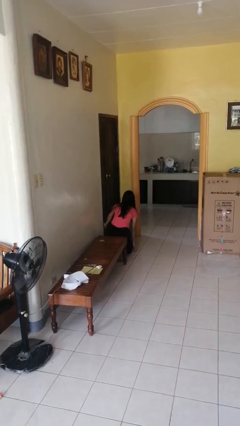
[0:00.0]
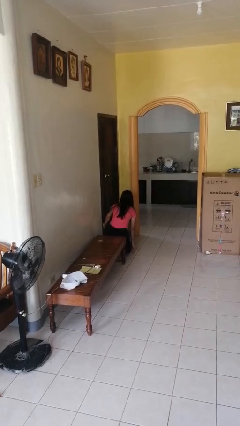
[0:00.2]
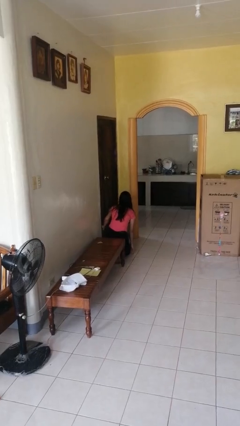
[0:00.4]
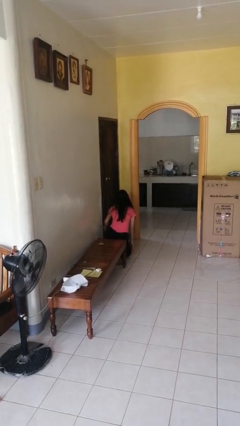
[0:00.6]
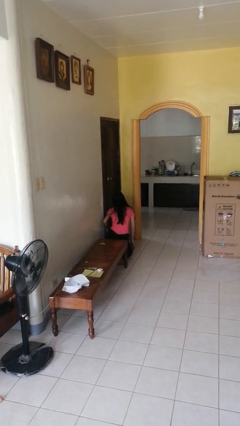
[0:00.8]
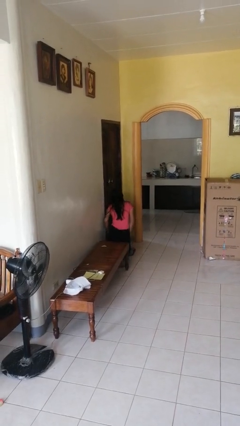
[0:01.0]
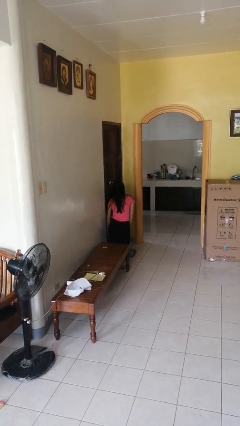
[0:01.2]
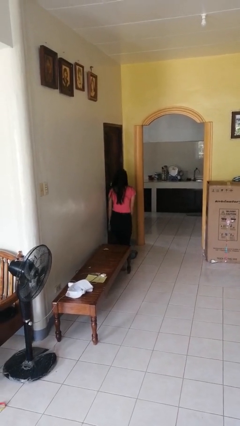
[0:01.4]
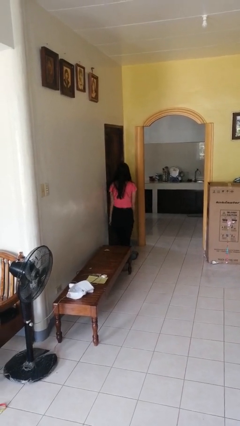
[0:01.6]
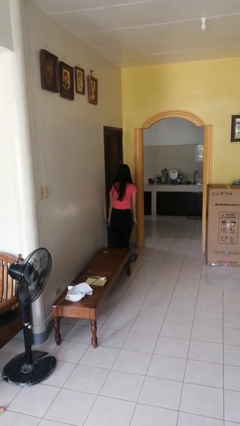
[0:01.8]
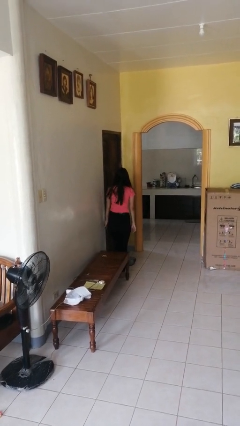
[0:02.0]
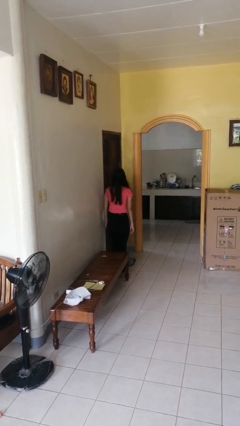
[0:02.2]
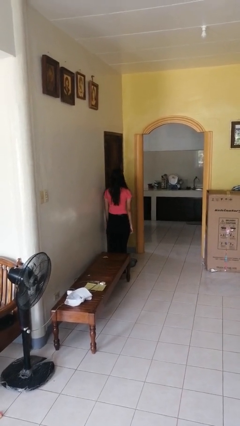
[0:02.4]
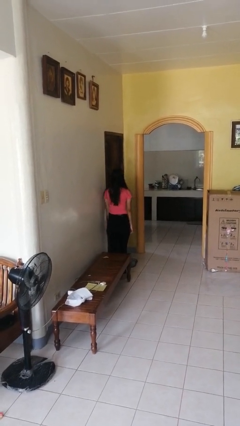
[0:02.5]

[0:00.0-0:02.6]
person stands up from floor

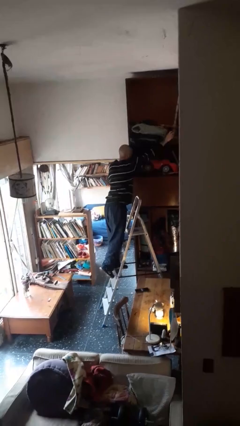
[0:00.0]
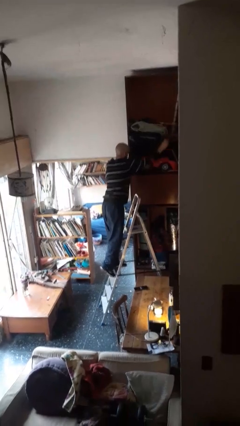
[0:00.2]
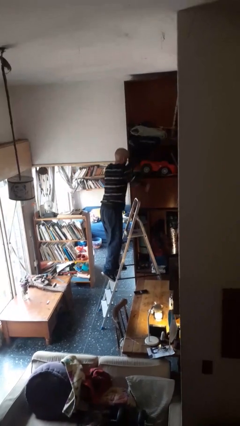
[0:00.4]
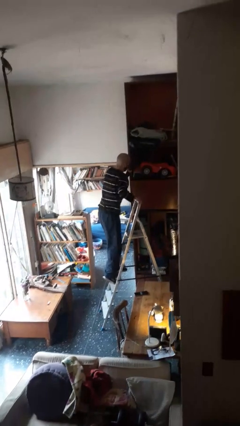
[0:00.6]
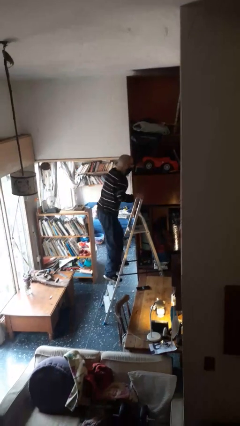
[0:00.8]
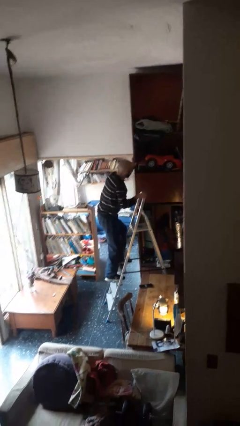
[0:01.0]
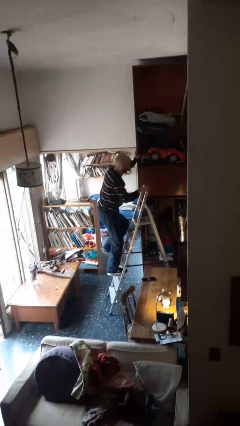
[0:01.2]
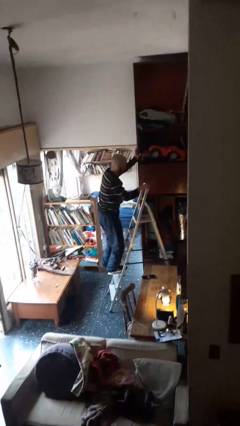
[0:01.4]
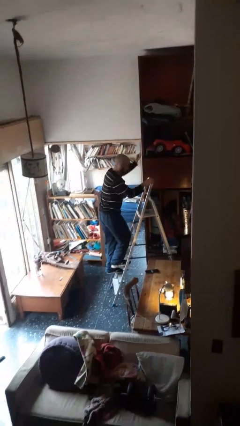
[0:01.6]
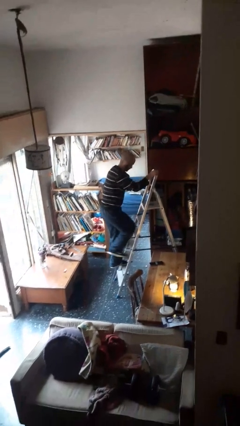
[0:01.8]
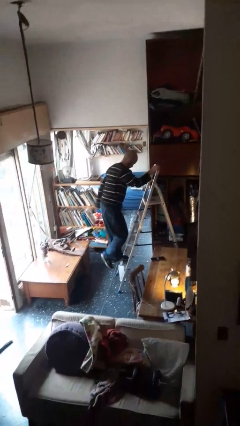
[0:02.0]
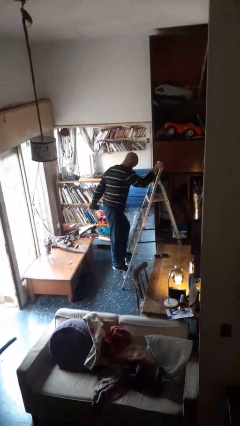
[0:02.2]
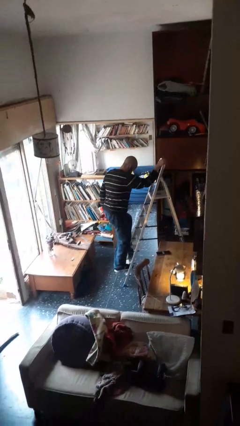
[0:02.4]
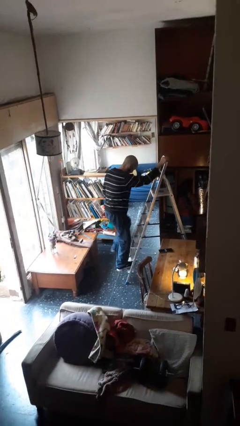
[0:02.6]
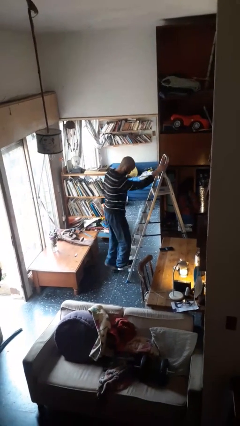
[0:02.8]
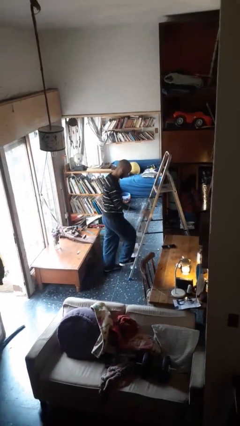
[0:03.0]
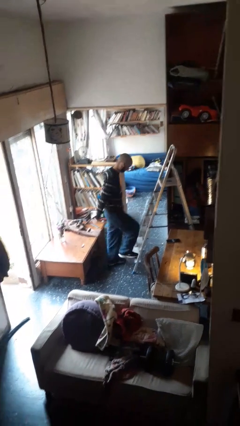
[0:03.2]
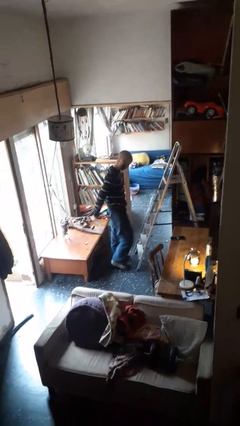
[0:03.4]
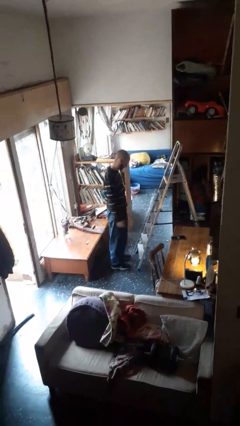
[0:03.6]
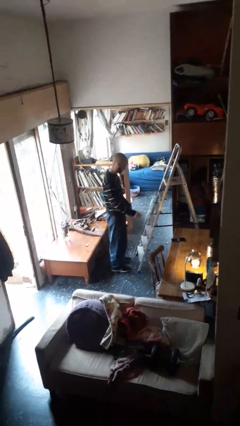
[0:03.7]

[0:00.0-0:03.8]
person climbs down ladder

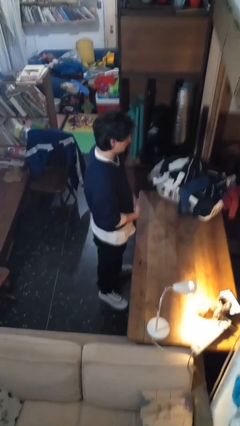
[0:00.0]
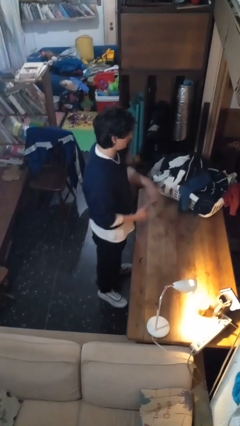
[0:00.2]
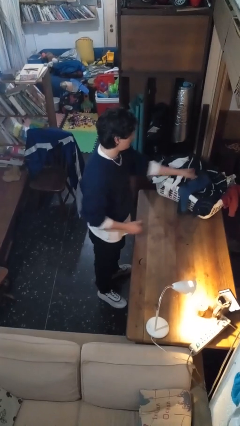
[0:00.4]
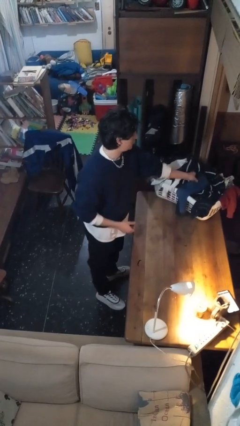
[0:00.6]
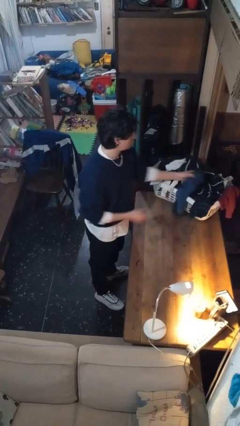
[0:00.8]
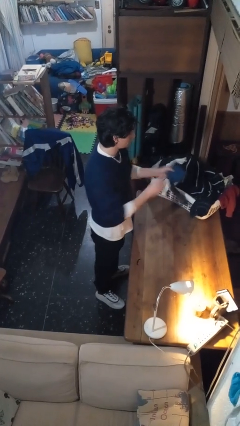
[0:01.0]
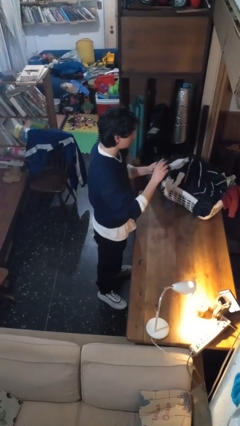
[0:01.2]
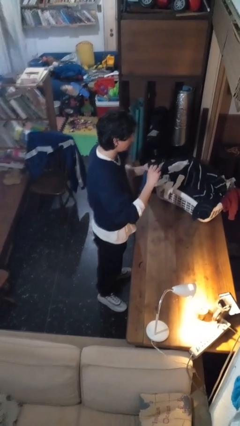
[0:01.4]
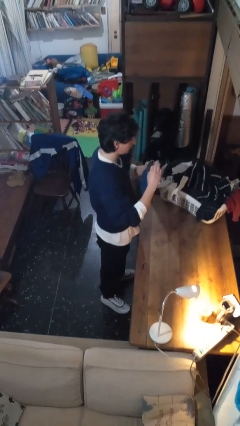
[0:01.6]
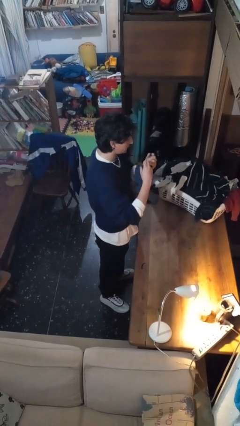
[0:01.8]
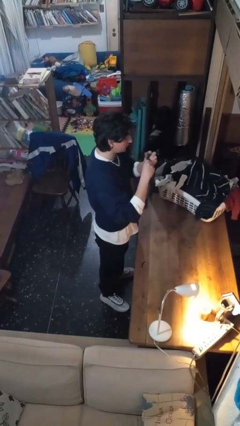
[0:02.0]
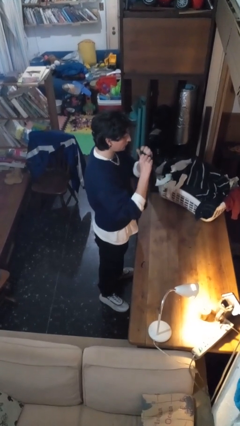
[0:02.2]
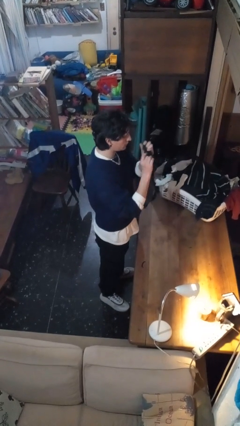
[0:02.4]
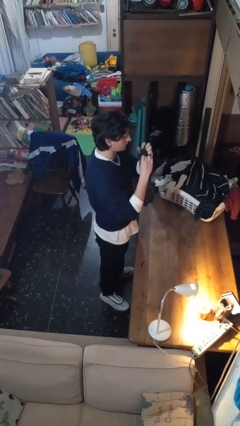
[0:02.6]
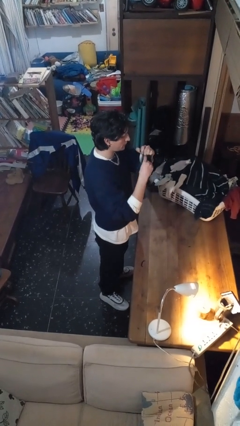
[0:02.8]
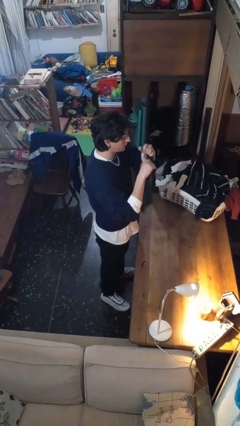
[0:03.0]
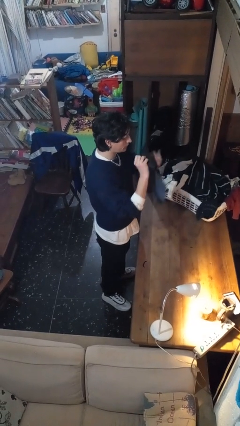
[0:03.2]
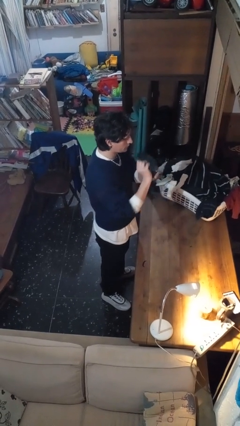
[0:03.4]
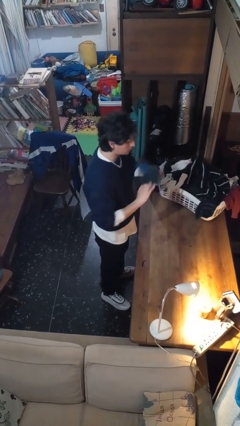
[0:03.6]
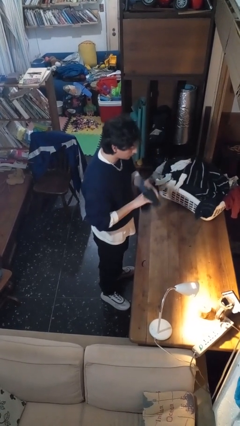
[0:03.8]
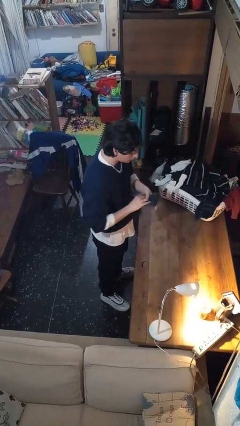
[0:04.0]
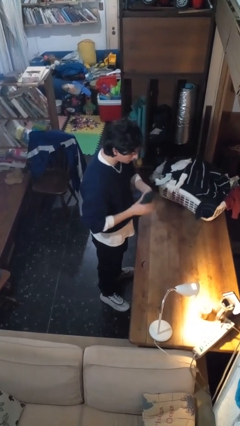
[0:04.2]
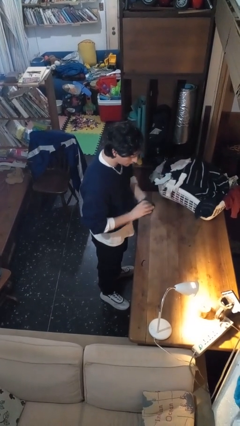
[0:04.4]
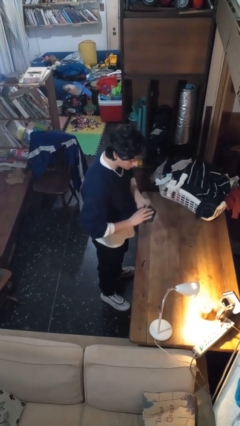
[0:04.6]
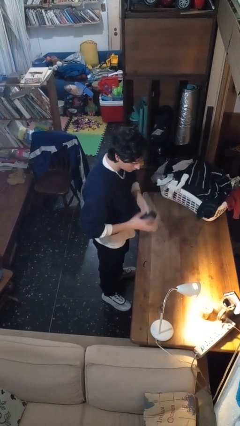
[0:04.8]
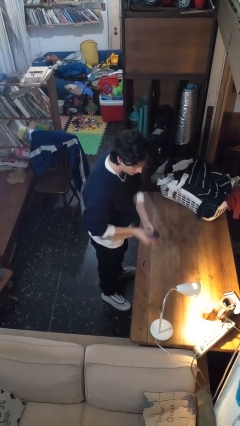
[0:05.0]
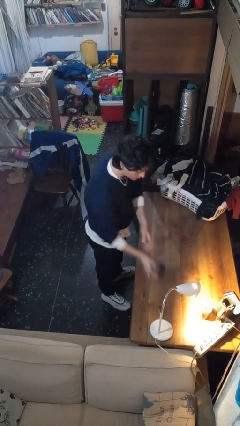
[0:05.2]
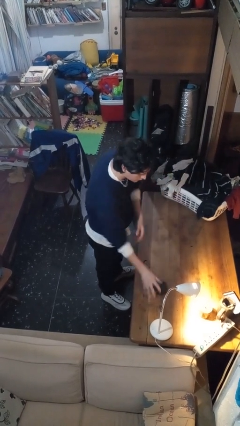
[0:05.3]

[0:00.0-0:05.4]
person folds socks

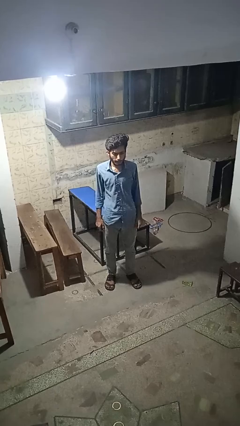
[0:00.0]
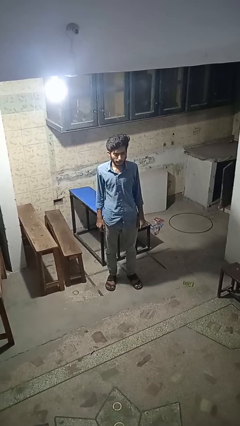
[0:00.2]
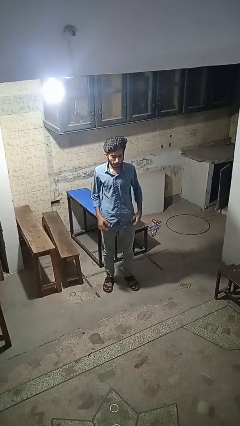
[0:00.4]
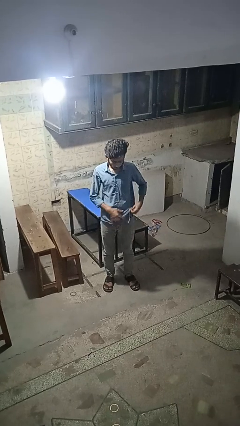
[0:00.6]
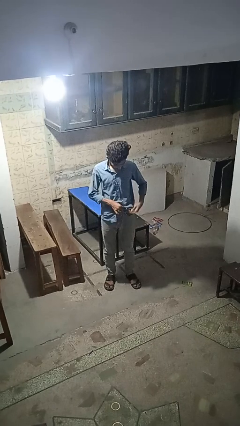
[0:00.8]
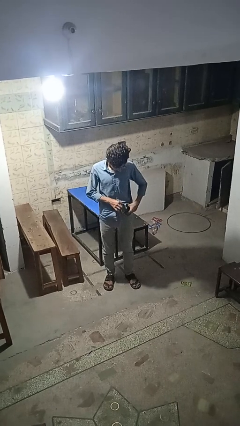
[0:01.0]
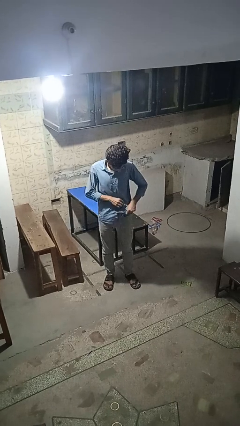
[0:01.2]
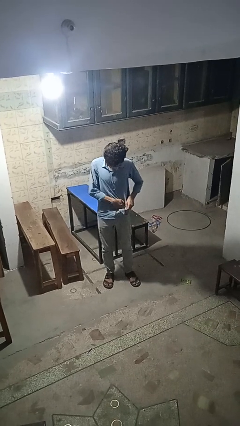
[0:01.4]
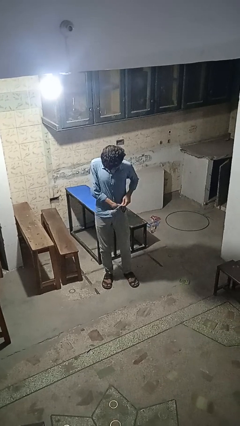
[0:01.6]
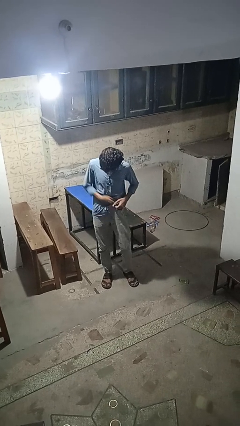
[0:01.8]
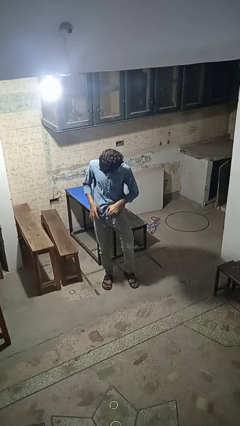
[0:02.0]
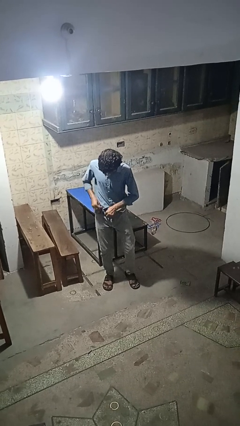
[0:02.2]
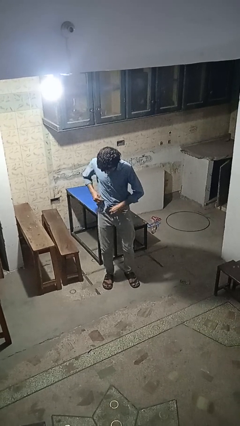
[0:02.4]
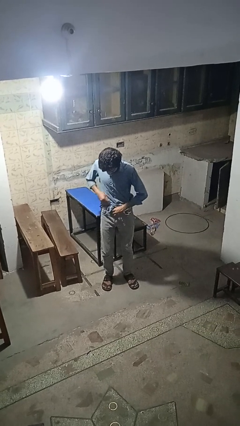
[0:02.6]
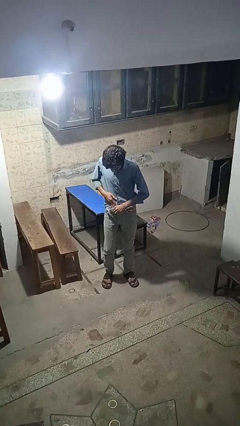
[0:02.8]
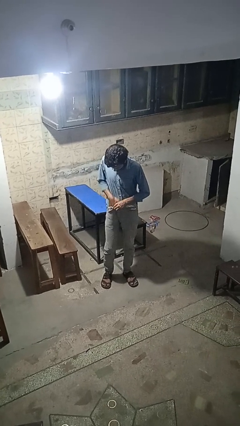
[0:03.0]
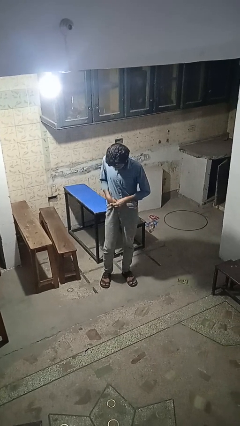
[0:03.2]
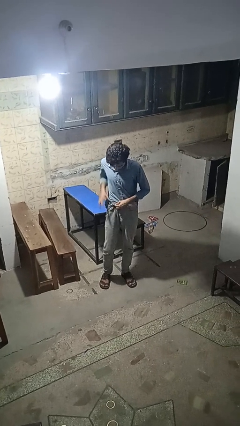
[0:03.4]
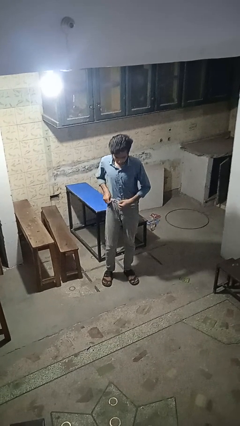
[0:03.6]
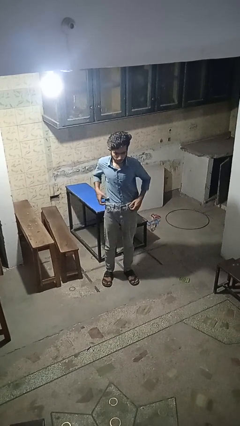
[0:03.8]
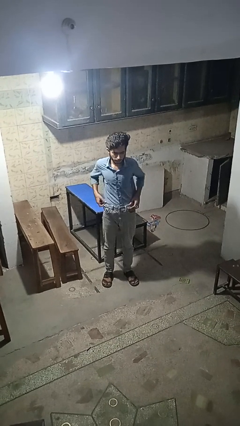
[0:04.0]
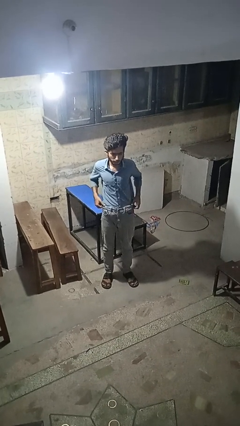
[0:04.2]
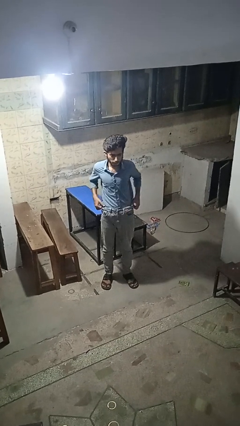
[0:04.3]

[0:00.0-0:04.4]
person tucks in shirt

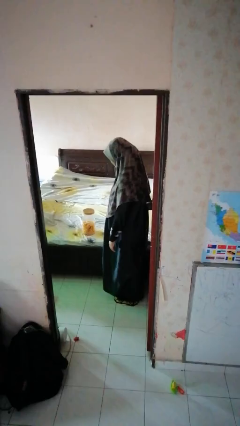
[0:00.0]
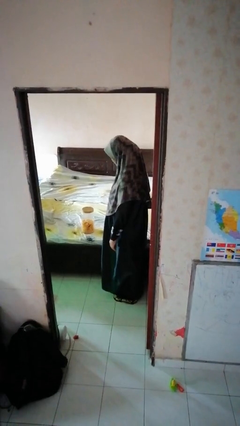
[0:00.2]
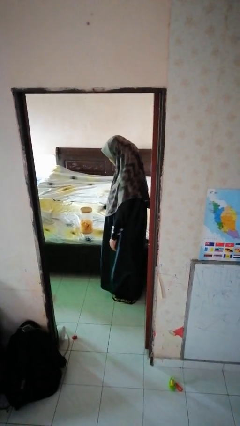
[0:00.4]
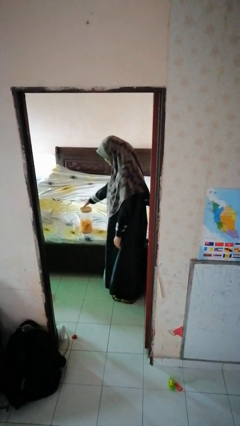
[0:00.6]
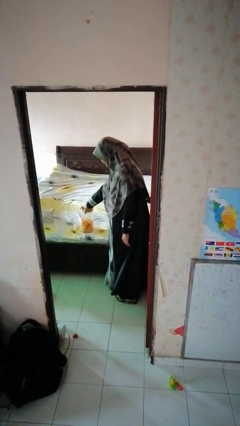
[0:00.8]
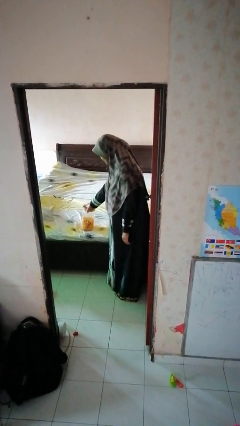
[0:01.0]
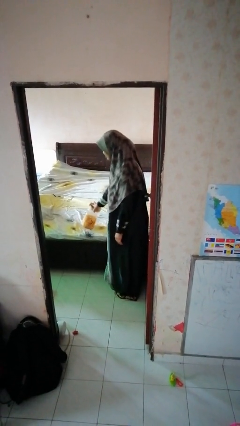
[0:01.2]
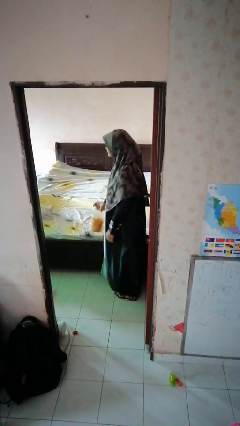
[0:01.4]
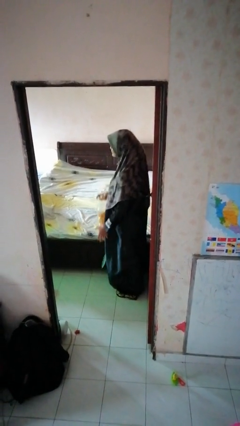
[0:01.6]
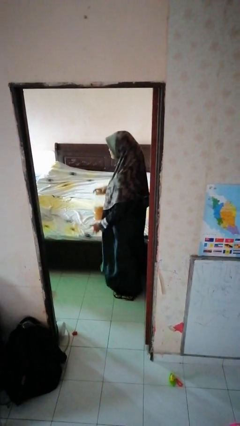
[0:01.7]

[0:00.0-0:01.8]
person picks up object from bed
